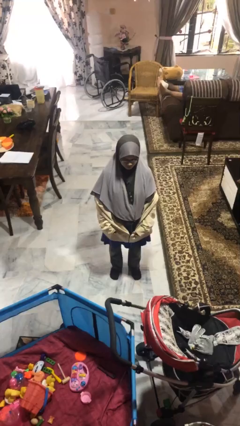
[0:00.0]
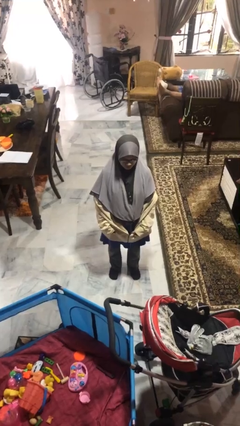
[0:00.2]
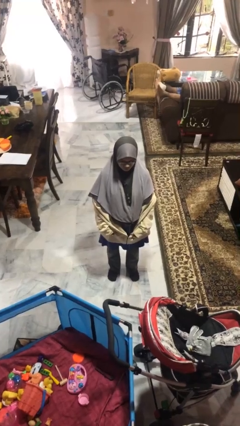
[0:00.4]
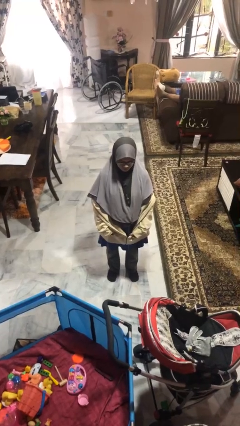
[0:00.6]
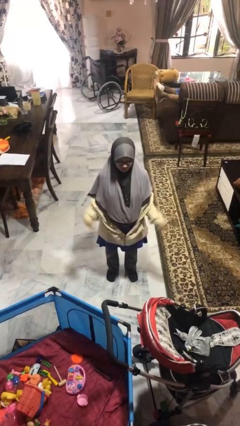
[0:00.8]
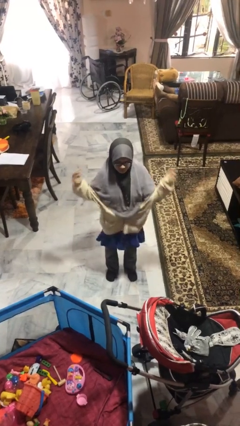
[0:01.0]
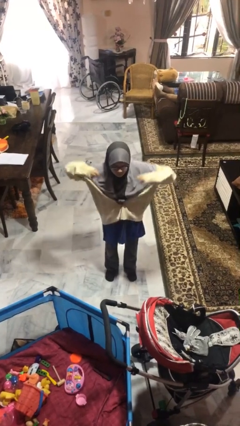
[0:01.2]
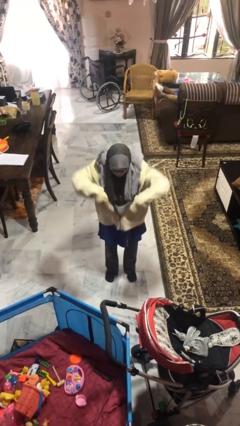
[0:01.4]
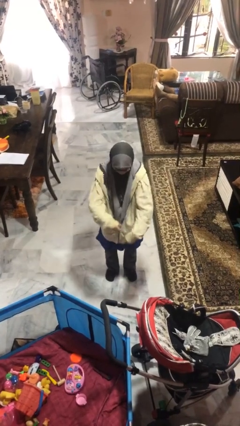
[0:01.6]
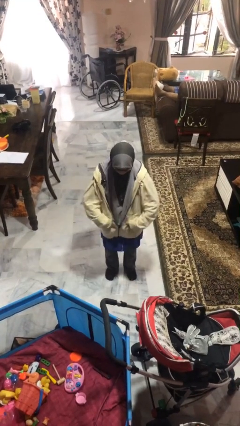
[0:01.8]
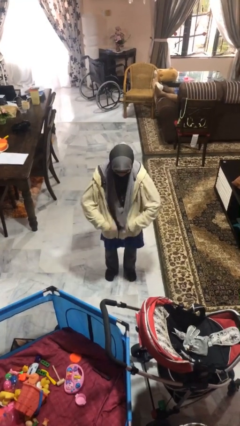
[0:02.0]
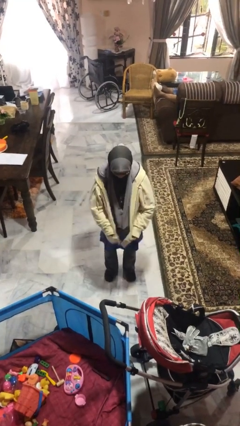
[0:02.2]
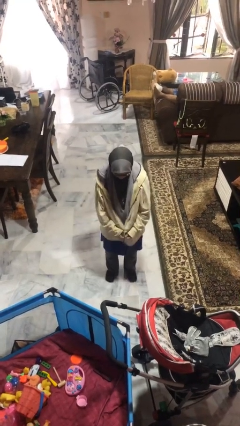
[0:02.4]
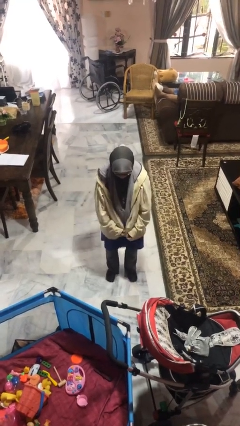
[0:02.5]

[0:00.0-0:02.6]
person puts on jacket

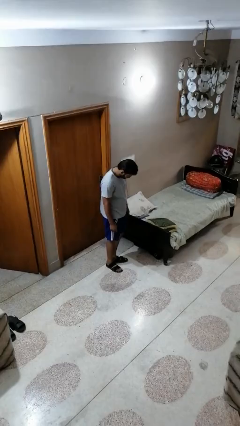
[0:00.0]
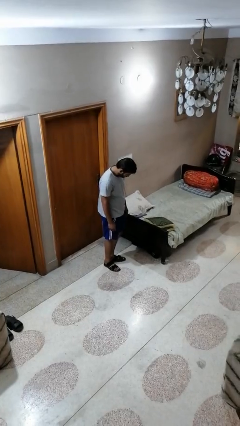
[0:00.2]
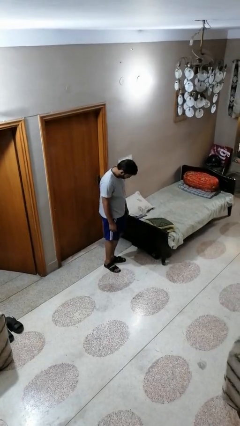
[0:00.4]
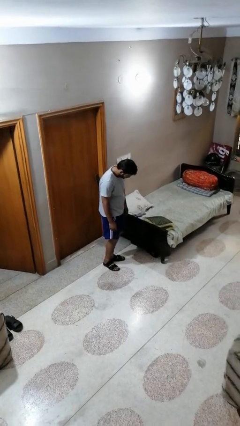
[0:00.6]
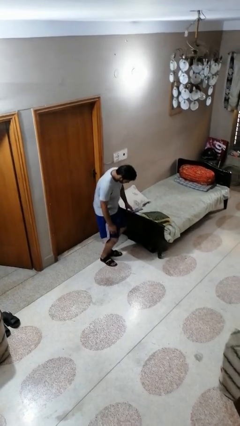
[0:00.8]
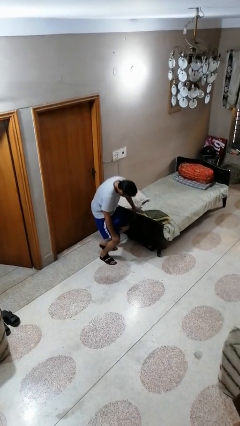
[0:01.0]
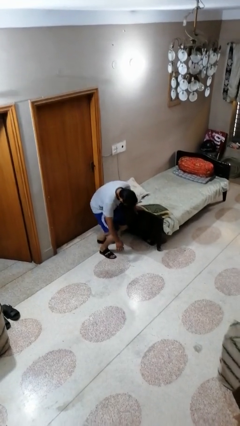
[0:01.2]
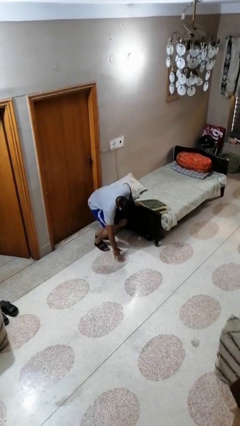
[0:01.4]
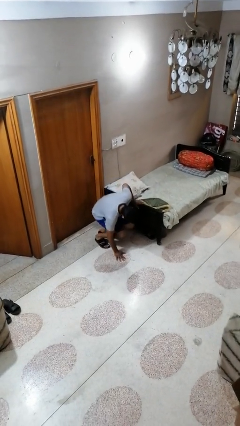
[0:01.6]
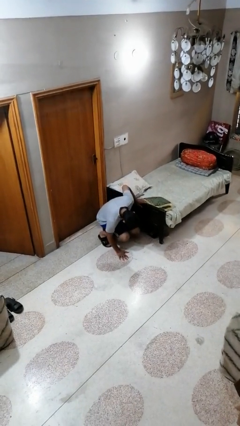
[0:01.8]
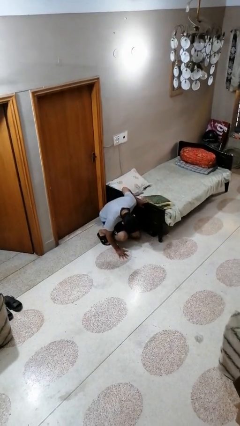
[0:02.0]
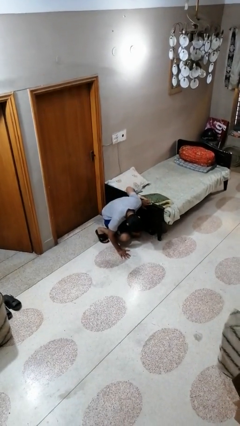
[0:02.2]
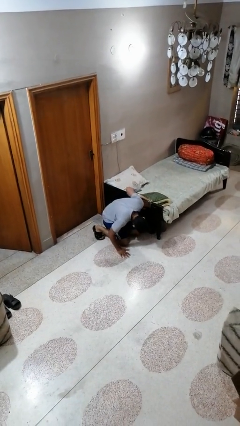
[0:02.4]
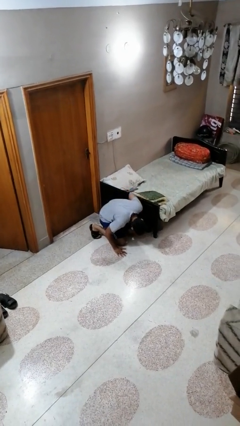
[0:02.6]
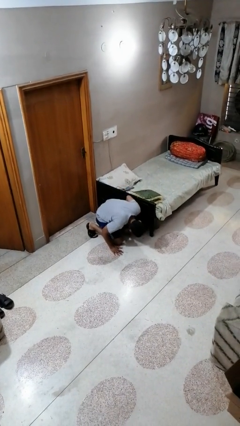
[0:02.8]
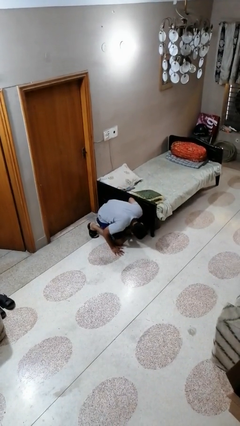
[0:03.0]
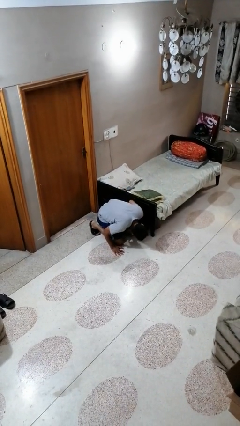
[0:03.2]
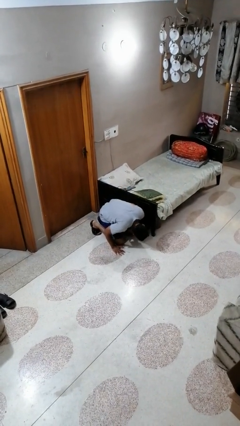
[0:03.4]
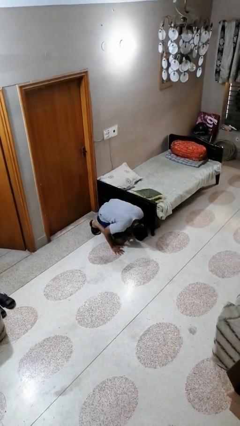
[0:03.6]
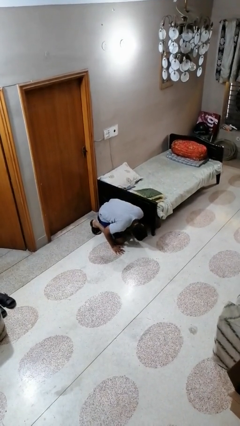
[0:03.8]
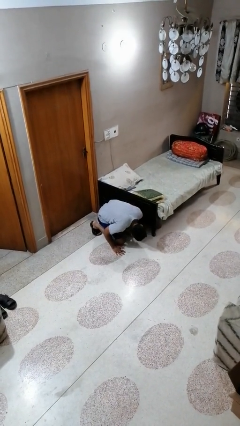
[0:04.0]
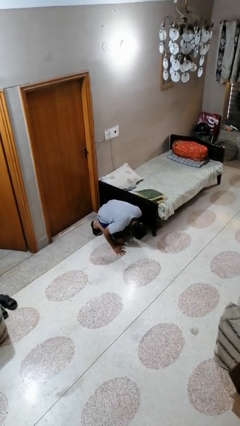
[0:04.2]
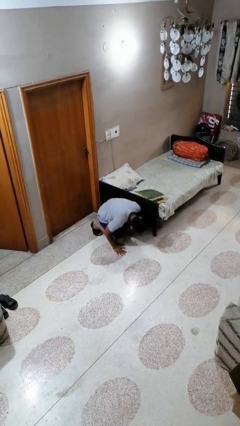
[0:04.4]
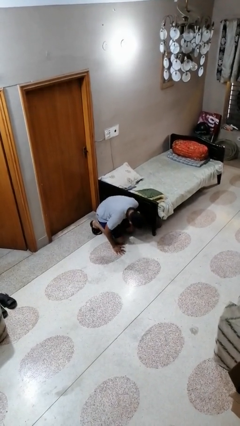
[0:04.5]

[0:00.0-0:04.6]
person searches under bed

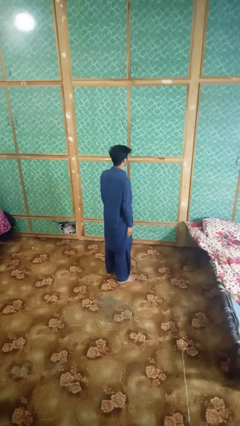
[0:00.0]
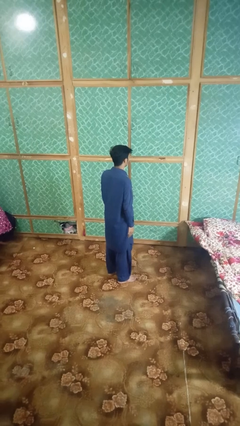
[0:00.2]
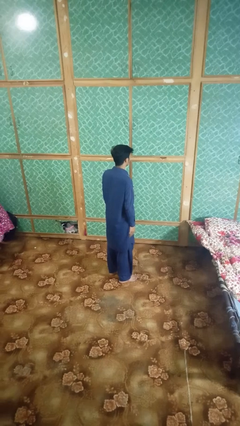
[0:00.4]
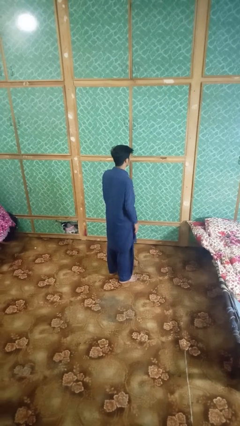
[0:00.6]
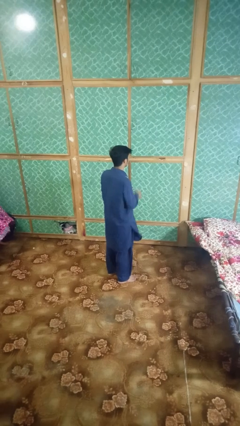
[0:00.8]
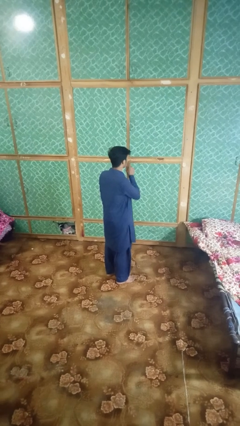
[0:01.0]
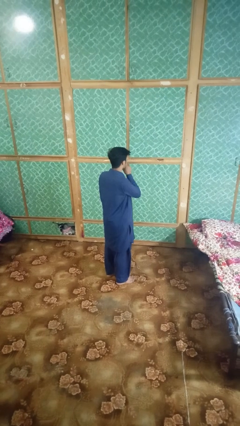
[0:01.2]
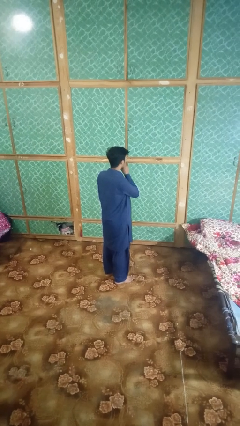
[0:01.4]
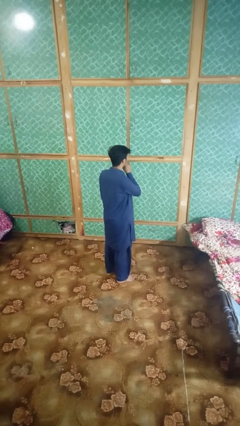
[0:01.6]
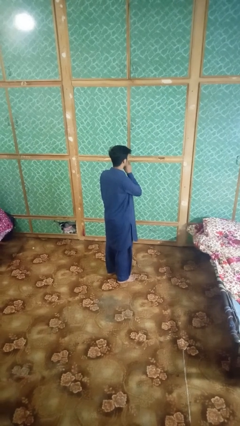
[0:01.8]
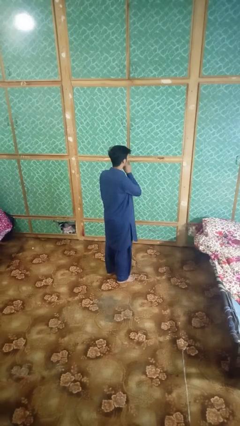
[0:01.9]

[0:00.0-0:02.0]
person gestures be quiet

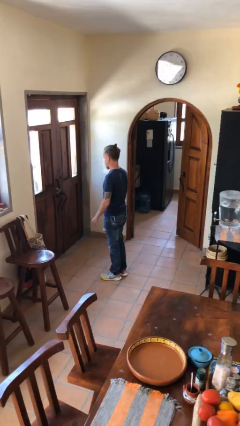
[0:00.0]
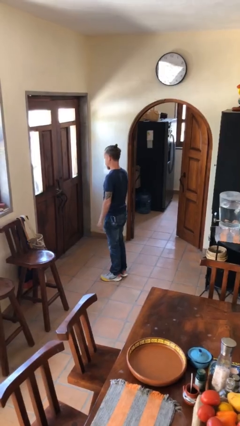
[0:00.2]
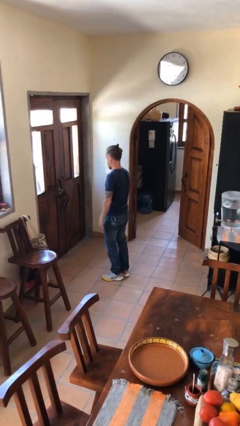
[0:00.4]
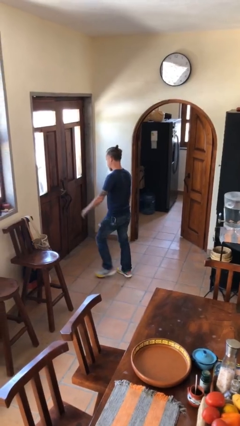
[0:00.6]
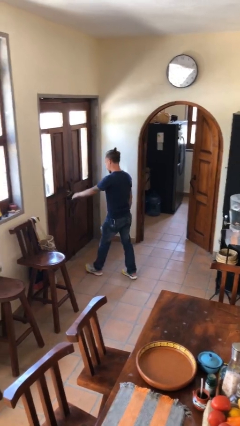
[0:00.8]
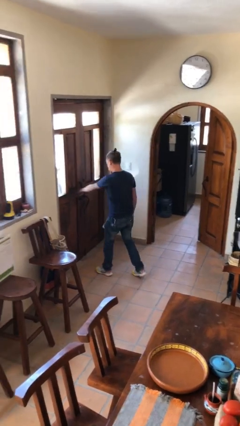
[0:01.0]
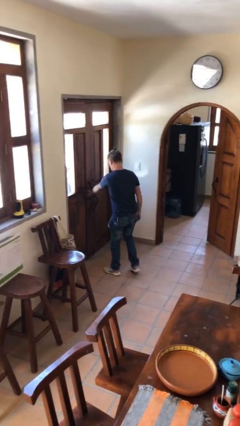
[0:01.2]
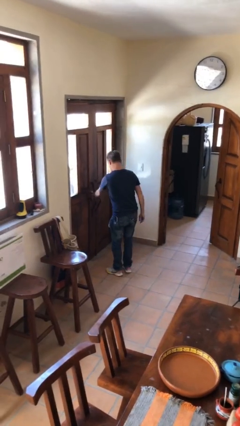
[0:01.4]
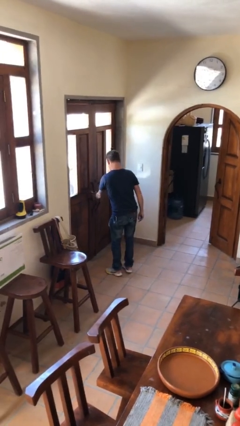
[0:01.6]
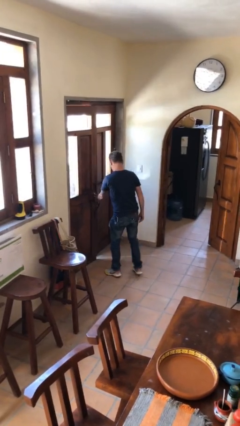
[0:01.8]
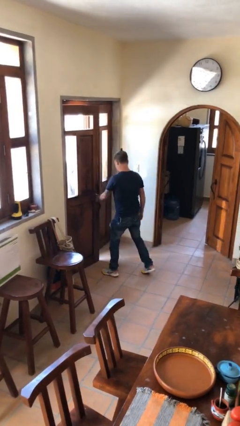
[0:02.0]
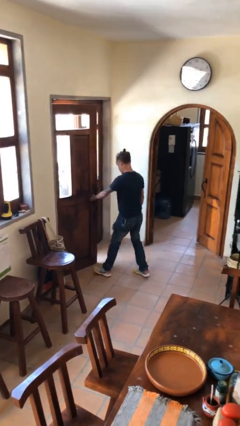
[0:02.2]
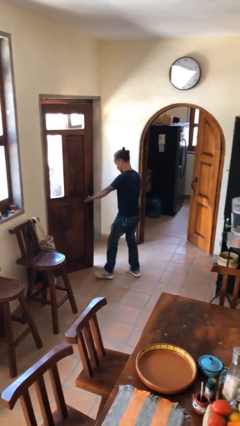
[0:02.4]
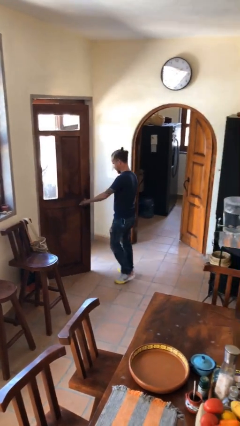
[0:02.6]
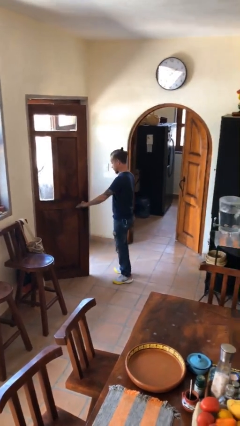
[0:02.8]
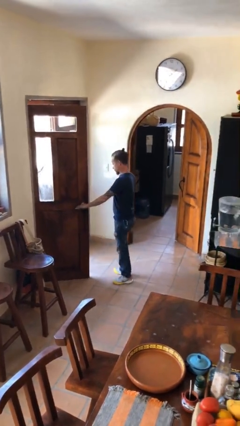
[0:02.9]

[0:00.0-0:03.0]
person opens facility door

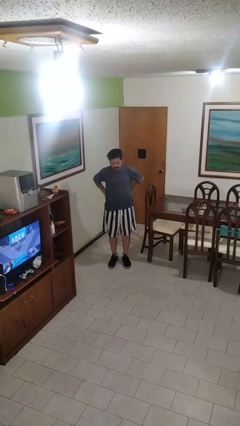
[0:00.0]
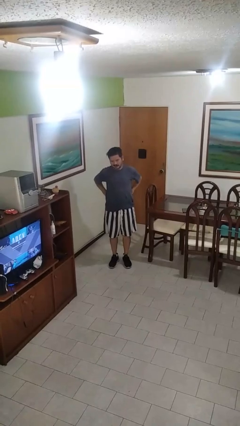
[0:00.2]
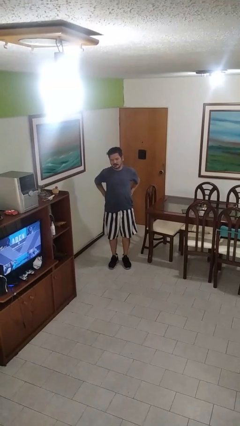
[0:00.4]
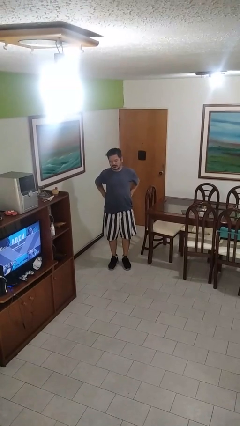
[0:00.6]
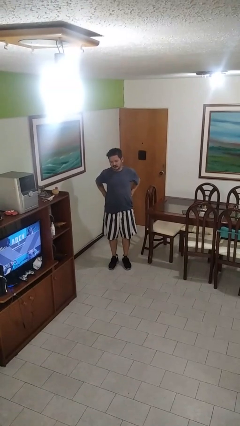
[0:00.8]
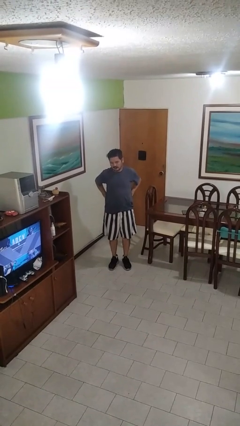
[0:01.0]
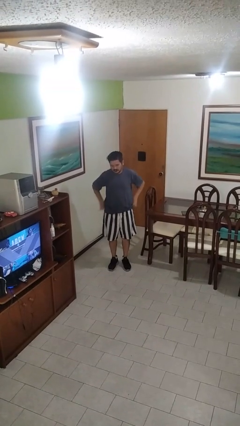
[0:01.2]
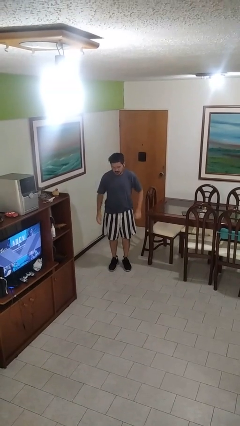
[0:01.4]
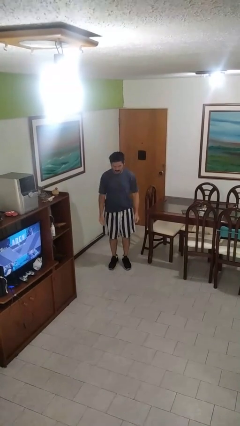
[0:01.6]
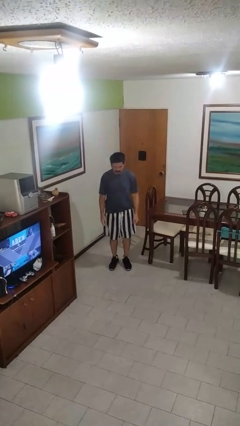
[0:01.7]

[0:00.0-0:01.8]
person stretches back

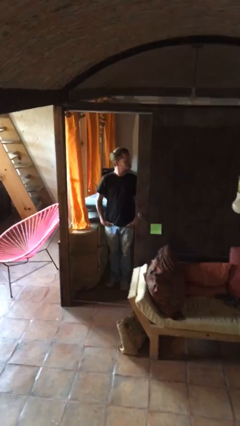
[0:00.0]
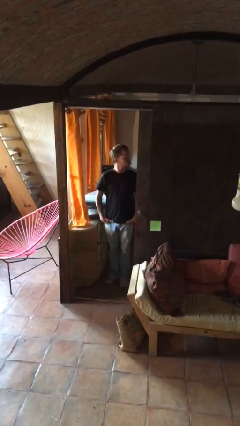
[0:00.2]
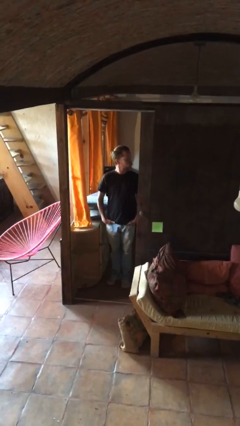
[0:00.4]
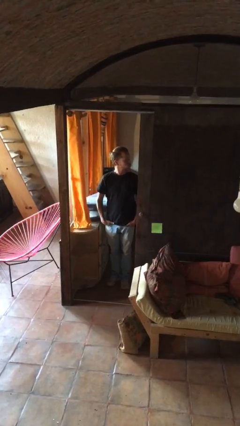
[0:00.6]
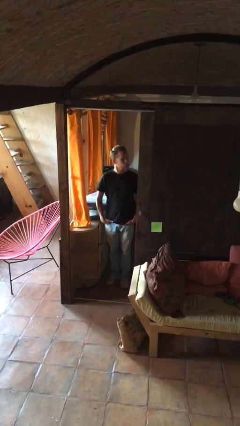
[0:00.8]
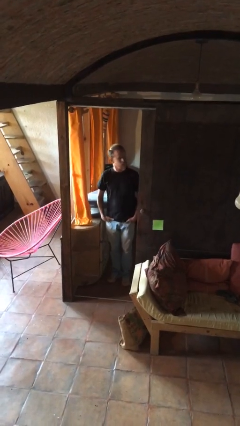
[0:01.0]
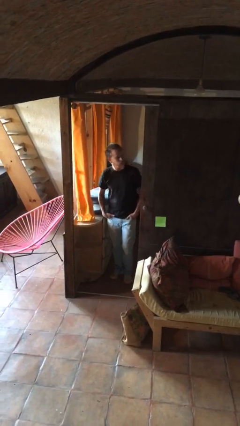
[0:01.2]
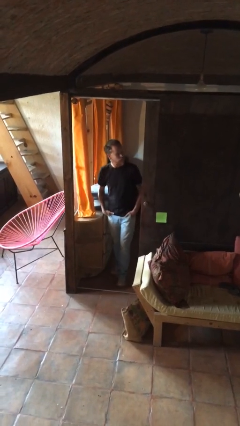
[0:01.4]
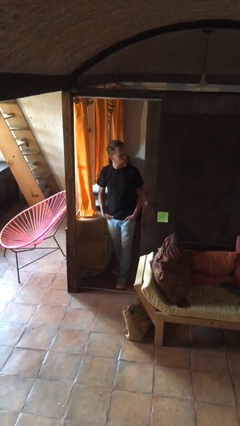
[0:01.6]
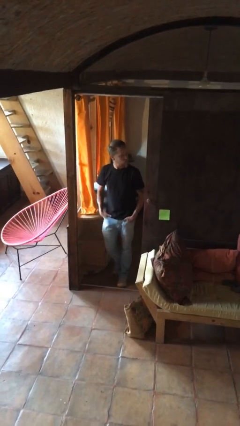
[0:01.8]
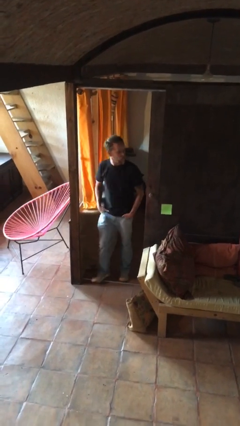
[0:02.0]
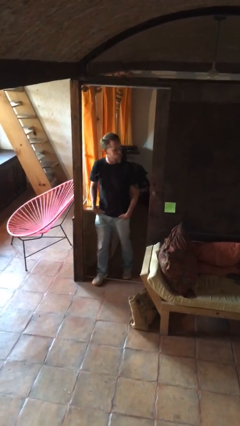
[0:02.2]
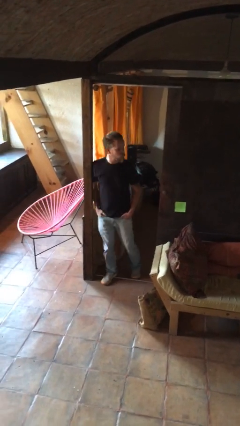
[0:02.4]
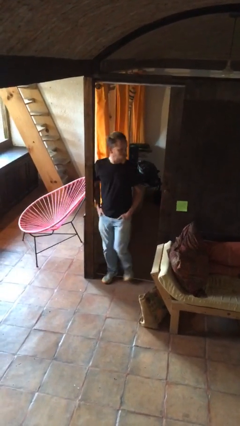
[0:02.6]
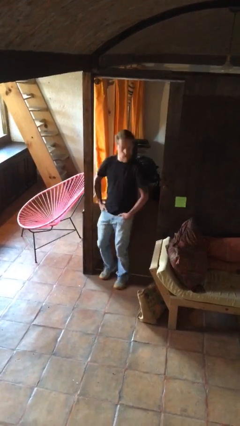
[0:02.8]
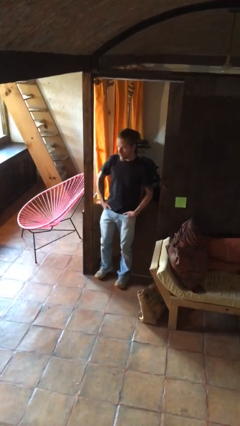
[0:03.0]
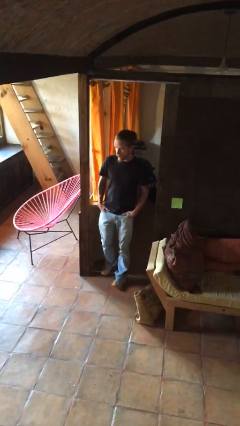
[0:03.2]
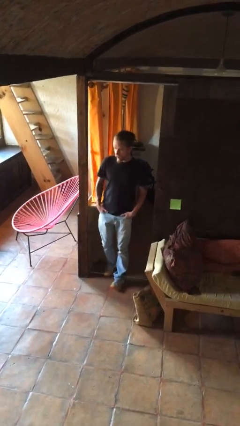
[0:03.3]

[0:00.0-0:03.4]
person bumps into wall
